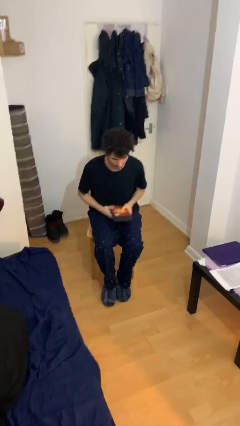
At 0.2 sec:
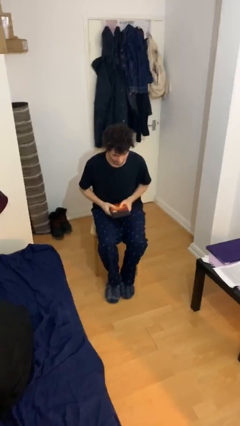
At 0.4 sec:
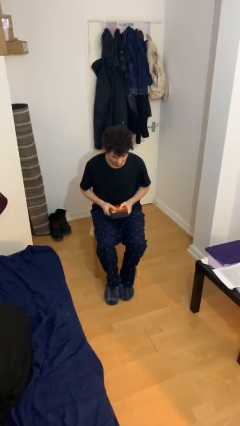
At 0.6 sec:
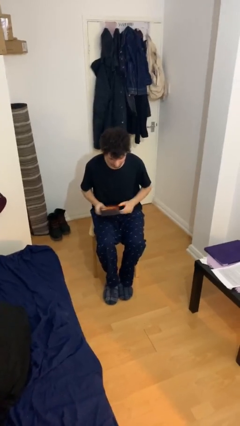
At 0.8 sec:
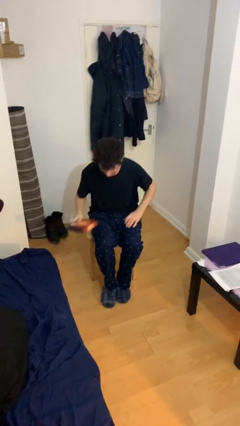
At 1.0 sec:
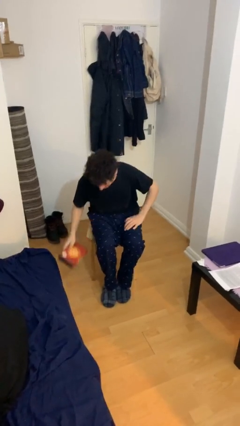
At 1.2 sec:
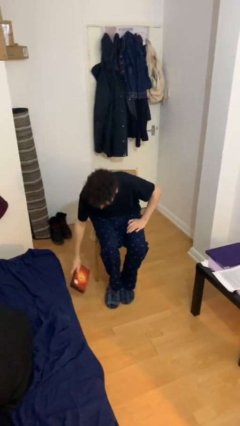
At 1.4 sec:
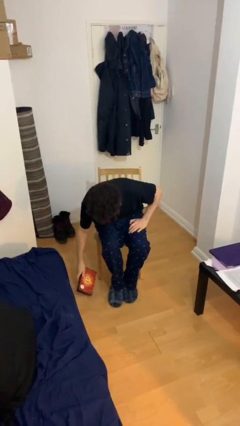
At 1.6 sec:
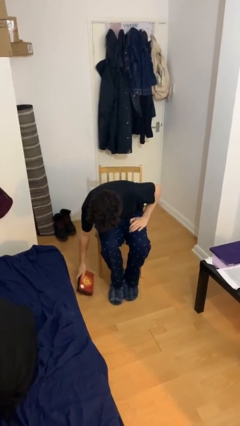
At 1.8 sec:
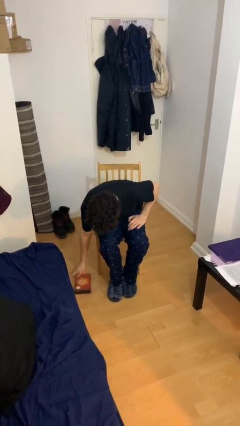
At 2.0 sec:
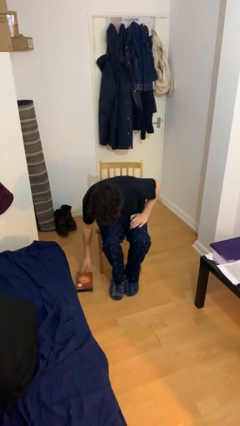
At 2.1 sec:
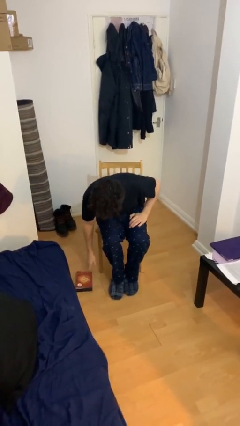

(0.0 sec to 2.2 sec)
person puts down object on floor

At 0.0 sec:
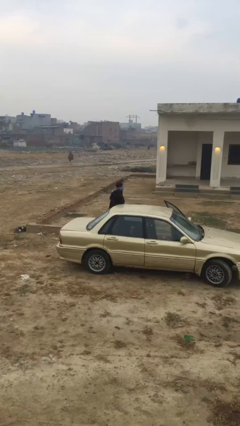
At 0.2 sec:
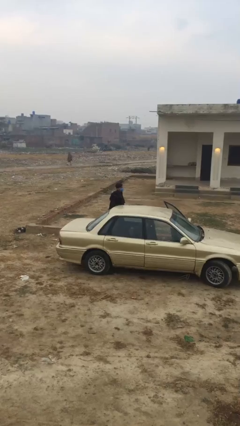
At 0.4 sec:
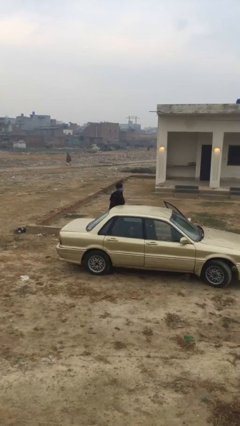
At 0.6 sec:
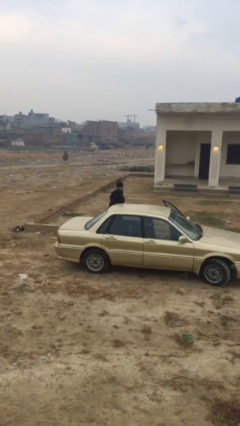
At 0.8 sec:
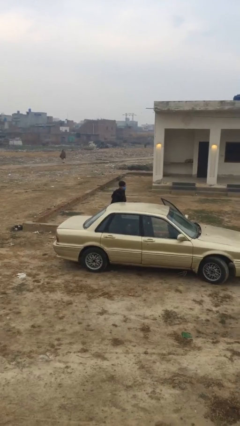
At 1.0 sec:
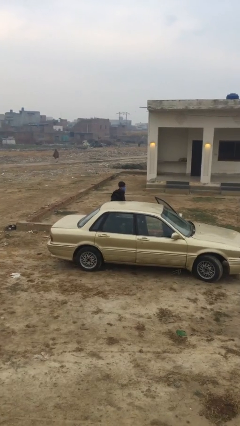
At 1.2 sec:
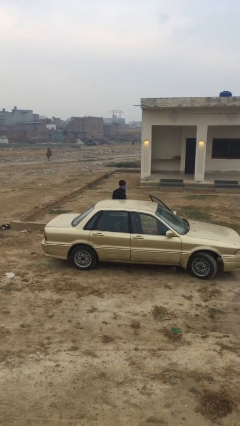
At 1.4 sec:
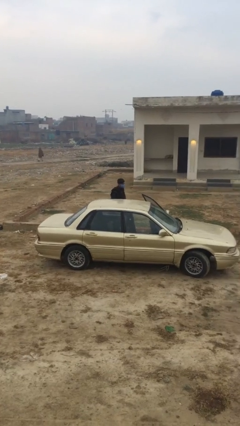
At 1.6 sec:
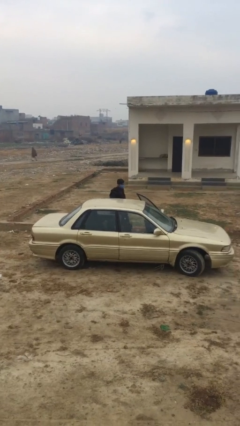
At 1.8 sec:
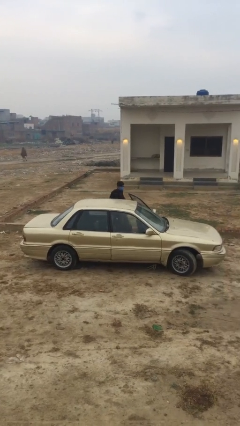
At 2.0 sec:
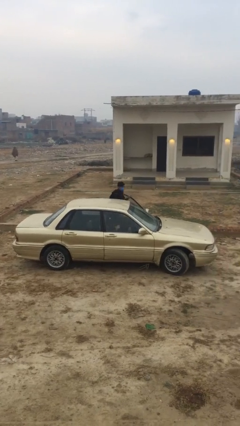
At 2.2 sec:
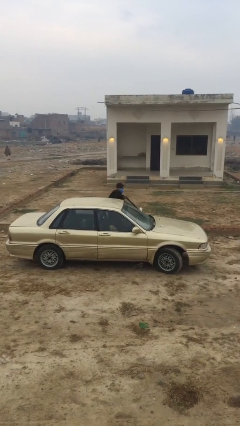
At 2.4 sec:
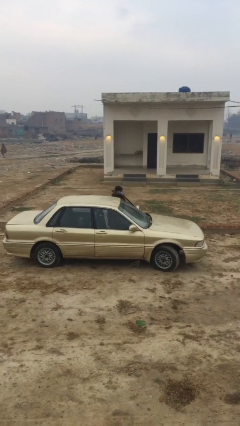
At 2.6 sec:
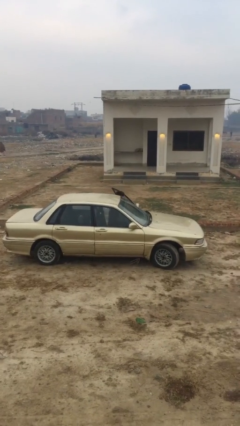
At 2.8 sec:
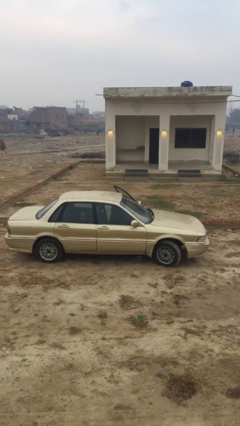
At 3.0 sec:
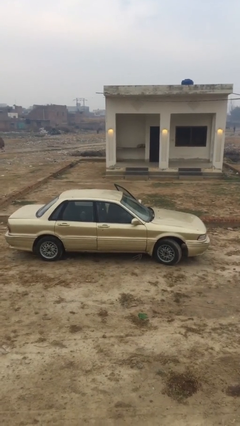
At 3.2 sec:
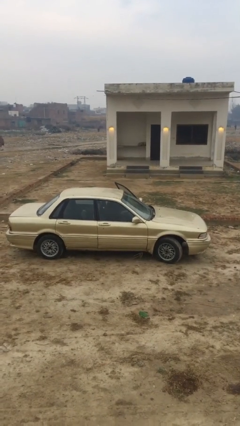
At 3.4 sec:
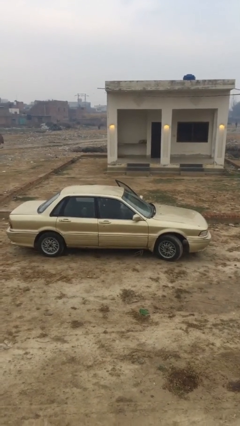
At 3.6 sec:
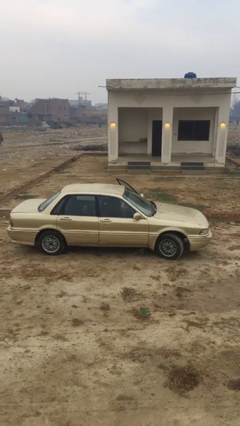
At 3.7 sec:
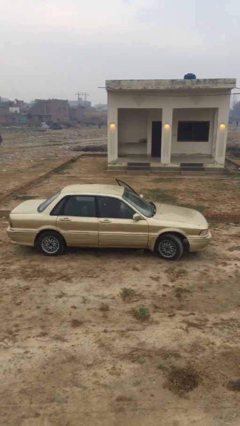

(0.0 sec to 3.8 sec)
person enters car

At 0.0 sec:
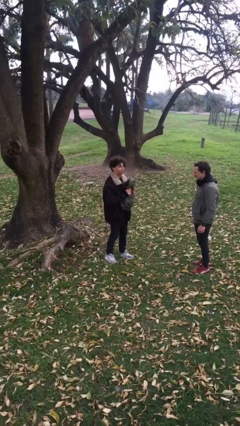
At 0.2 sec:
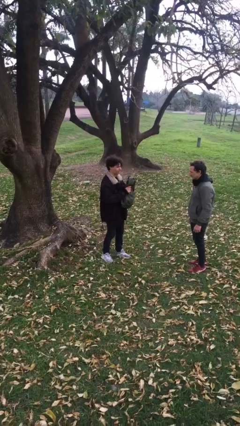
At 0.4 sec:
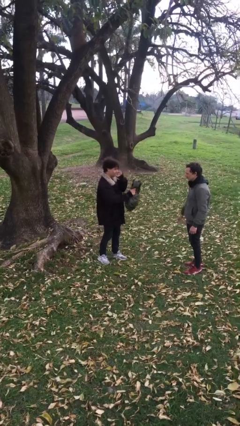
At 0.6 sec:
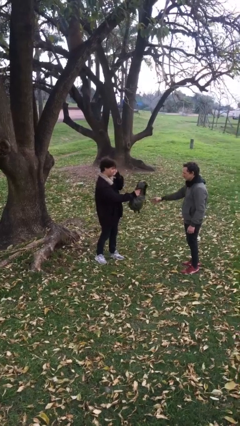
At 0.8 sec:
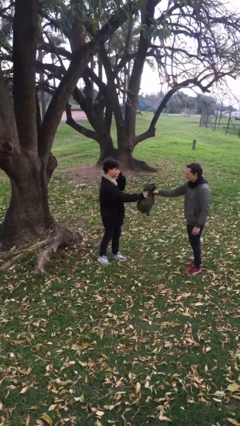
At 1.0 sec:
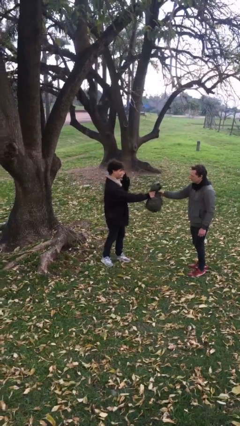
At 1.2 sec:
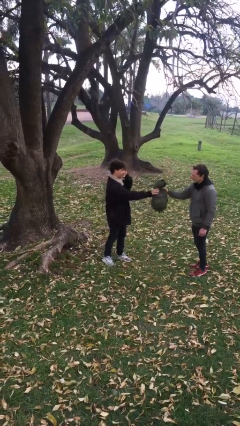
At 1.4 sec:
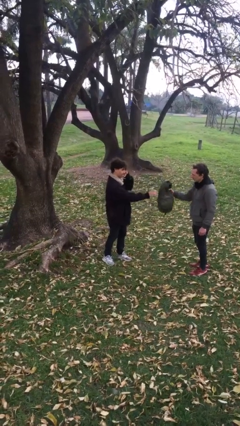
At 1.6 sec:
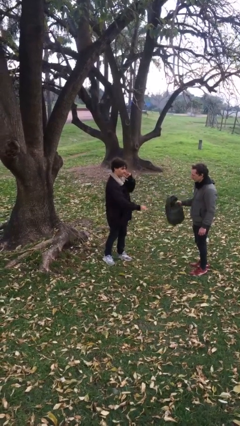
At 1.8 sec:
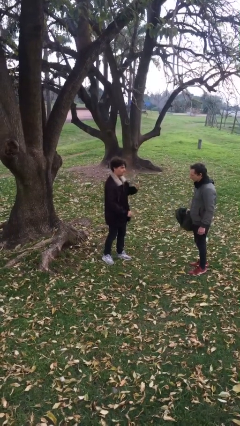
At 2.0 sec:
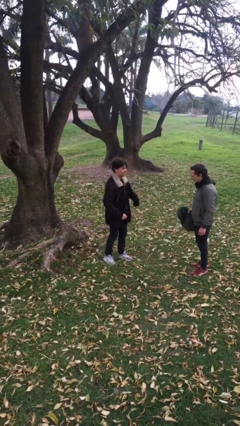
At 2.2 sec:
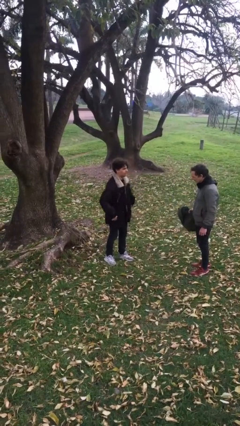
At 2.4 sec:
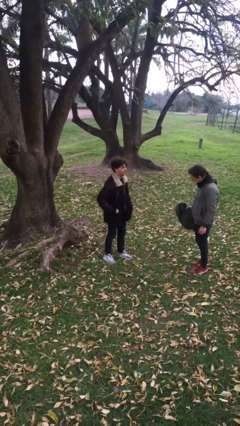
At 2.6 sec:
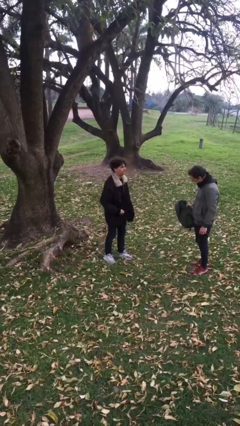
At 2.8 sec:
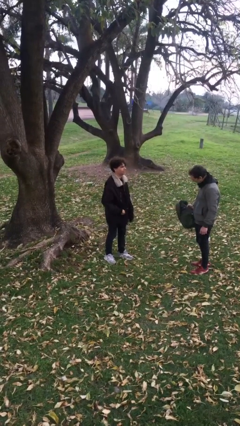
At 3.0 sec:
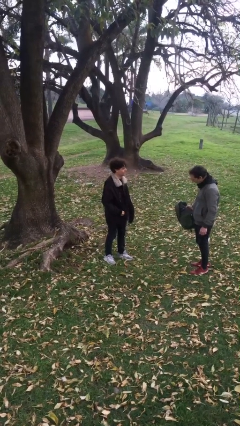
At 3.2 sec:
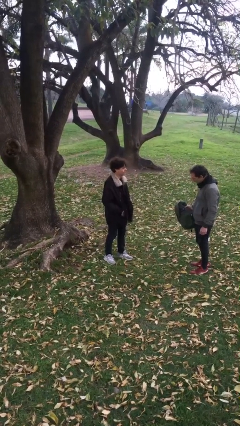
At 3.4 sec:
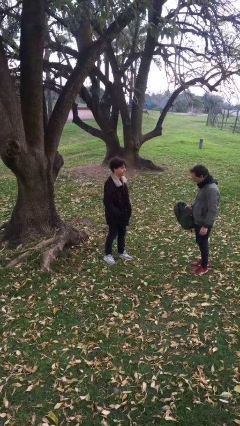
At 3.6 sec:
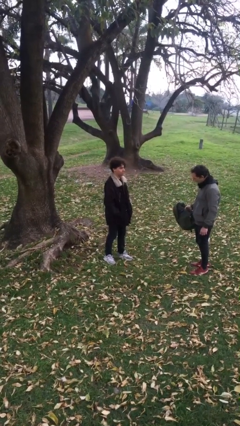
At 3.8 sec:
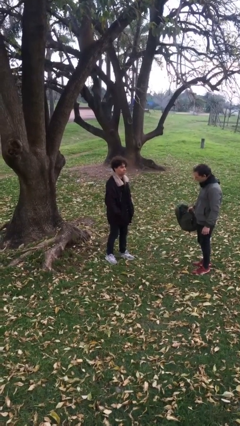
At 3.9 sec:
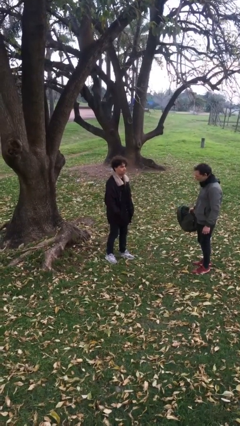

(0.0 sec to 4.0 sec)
person transfers object to person

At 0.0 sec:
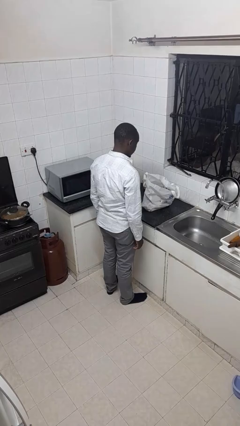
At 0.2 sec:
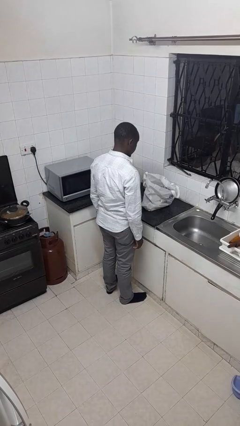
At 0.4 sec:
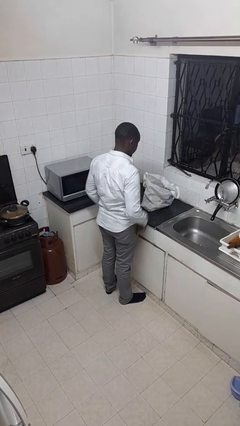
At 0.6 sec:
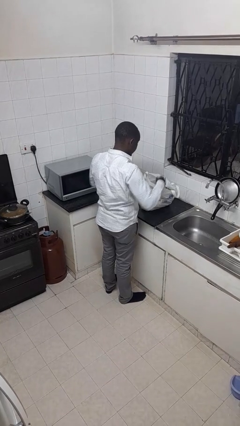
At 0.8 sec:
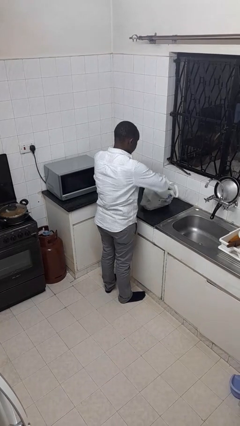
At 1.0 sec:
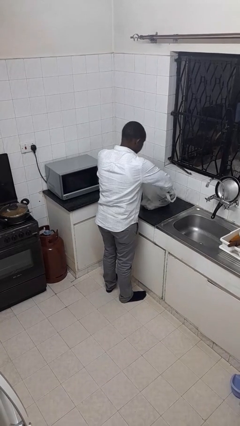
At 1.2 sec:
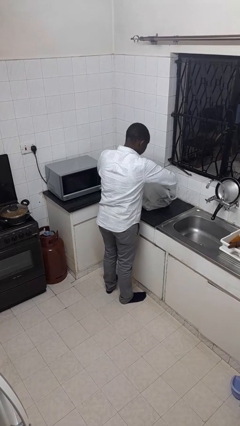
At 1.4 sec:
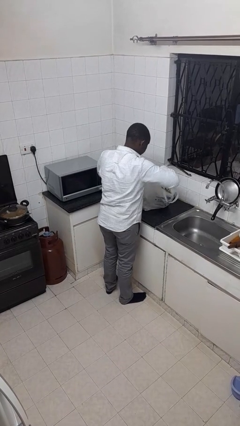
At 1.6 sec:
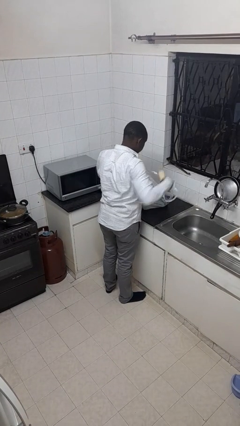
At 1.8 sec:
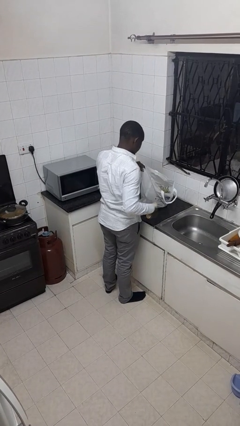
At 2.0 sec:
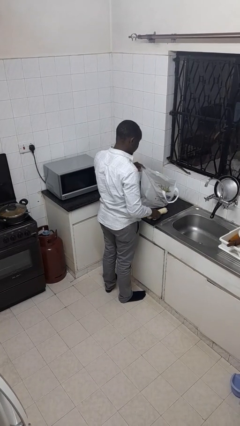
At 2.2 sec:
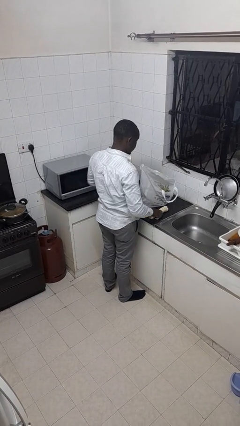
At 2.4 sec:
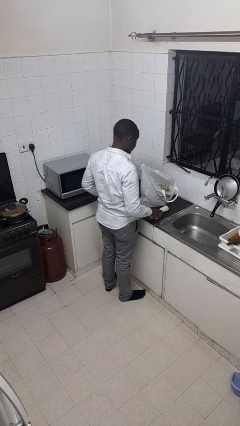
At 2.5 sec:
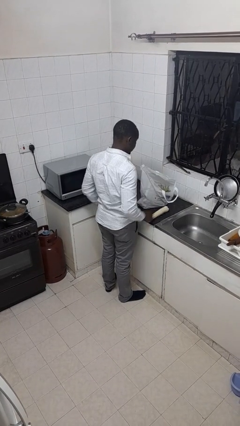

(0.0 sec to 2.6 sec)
person takes object from bag

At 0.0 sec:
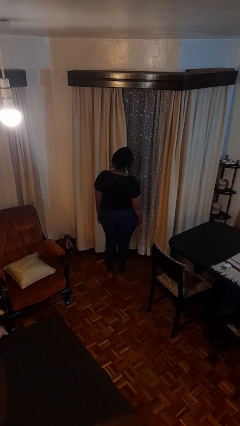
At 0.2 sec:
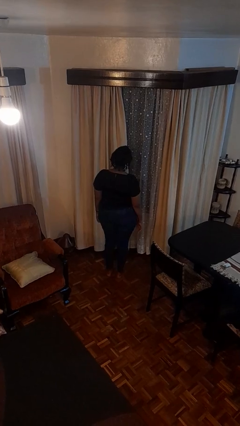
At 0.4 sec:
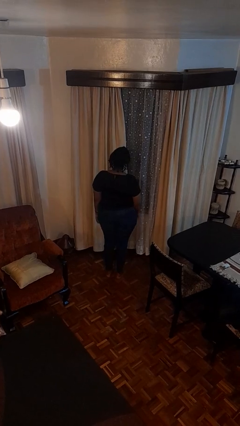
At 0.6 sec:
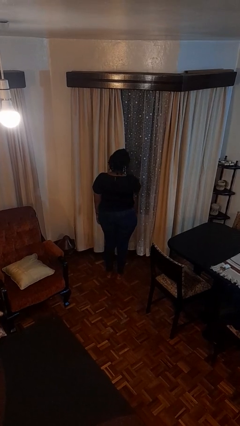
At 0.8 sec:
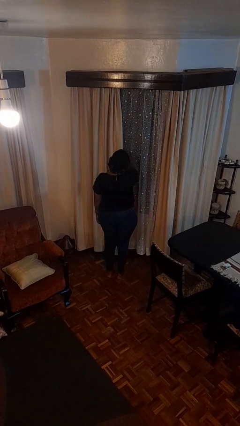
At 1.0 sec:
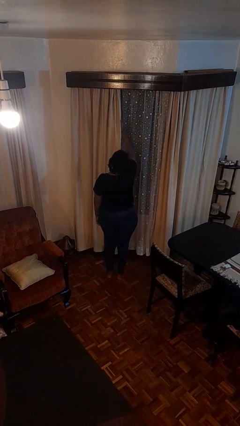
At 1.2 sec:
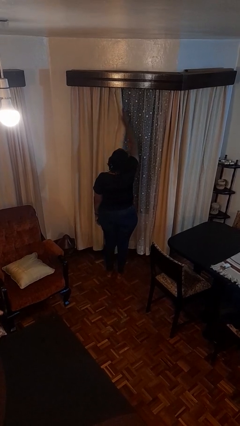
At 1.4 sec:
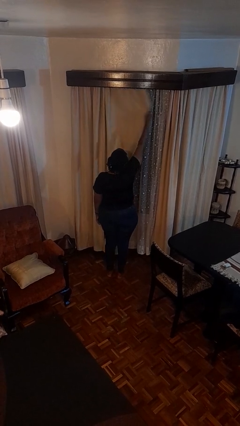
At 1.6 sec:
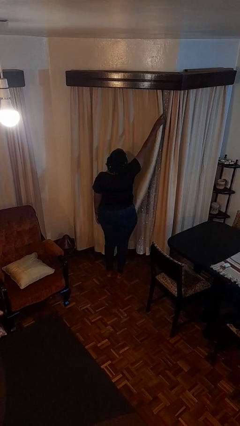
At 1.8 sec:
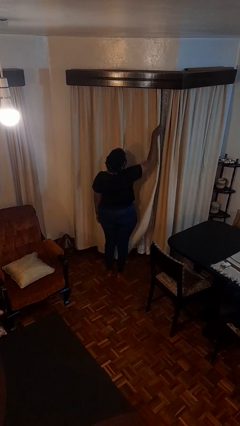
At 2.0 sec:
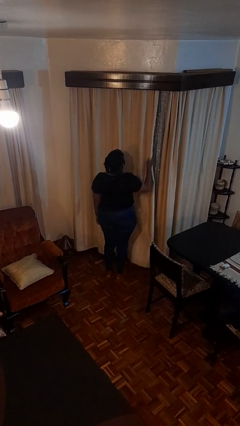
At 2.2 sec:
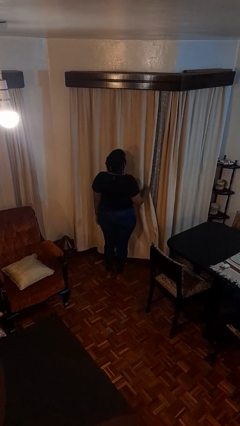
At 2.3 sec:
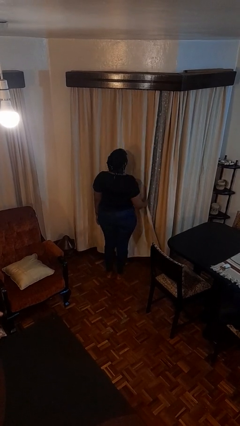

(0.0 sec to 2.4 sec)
person closes curtains

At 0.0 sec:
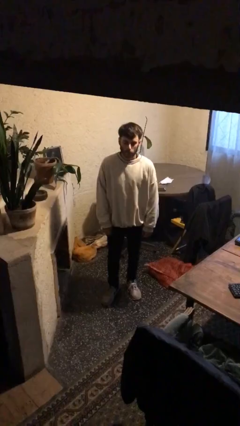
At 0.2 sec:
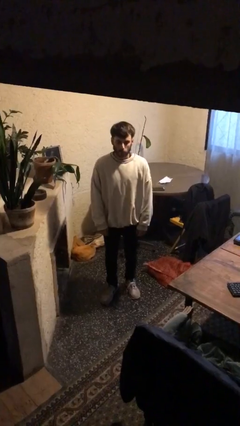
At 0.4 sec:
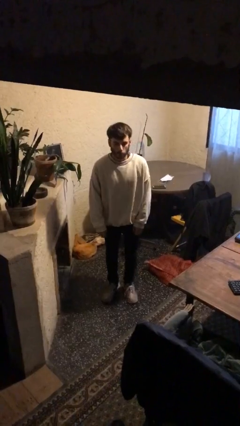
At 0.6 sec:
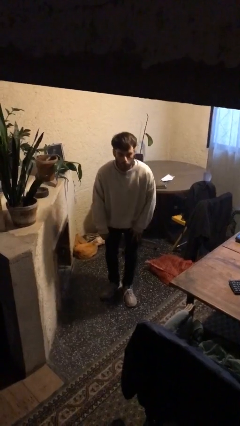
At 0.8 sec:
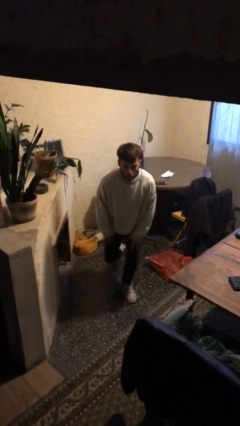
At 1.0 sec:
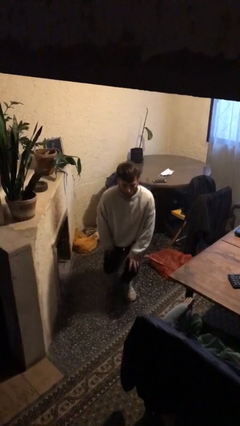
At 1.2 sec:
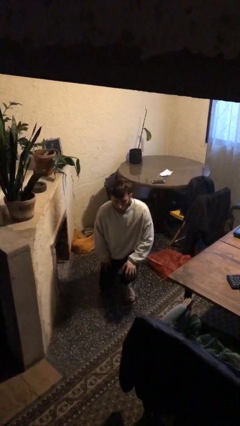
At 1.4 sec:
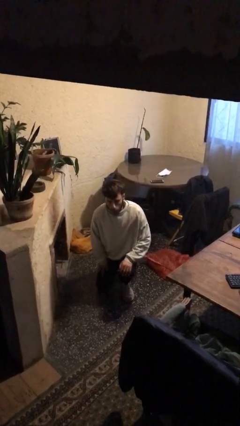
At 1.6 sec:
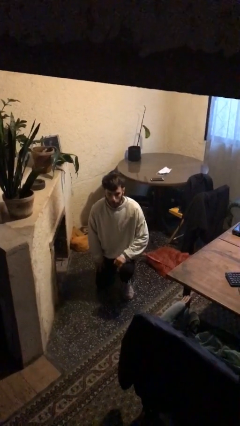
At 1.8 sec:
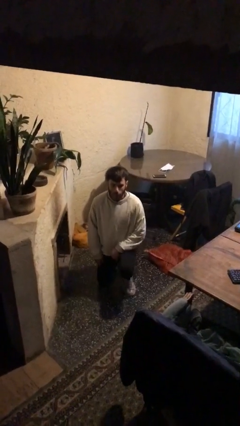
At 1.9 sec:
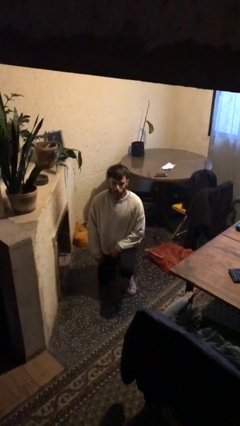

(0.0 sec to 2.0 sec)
person kneels

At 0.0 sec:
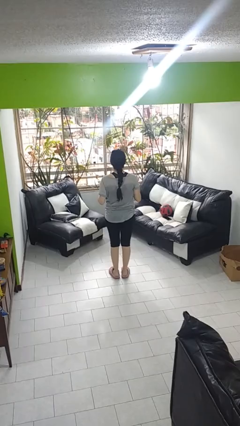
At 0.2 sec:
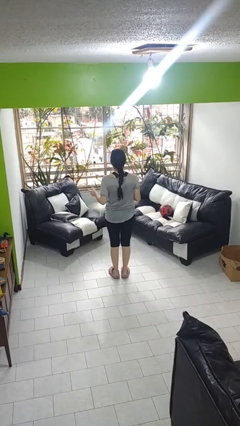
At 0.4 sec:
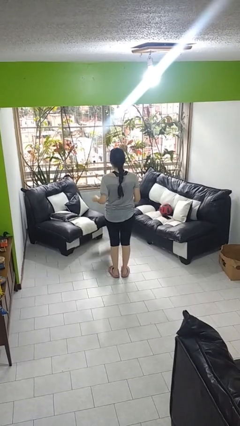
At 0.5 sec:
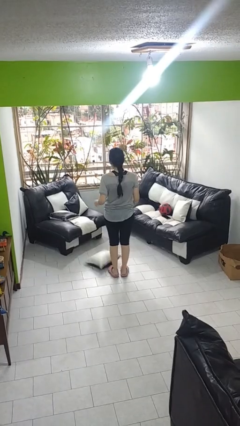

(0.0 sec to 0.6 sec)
person drops object
